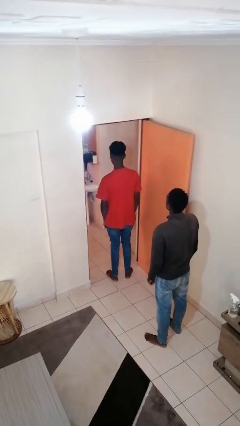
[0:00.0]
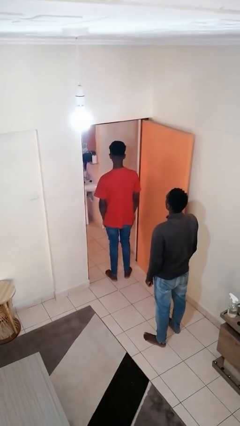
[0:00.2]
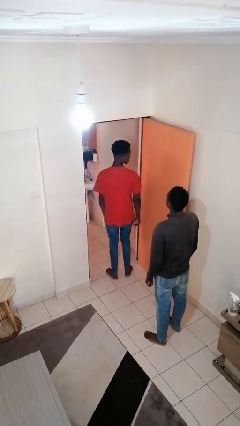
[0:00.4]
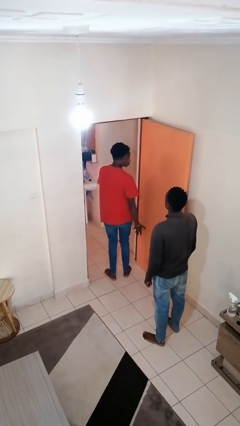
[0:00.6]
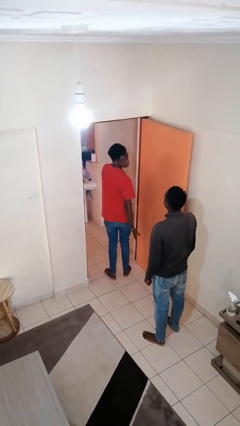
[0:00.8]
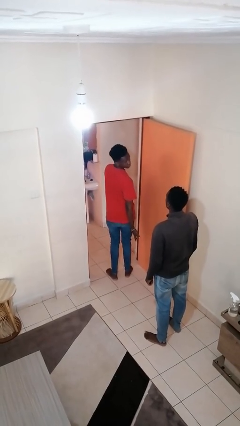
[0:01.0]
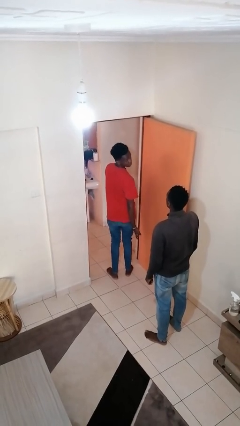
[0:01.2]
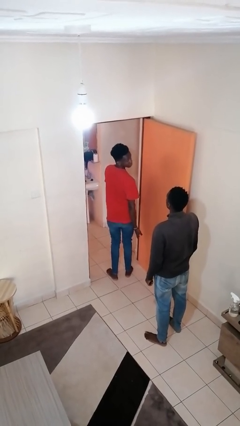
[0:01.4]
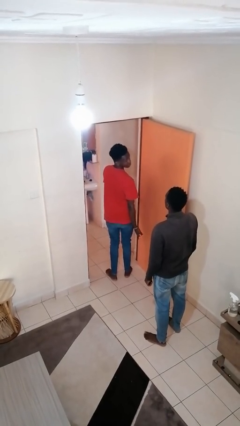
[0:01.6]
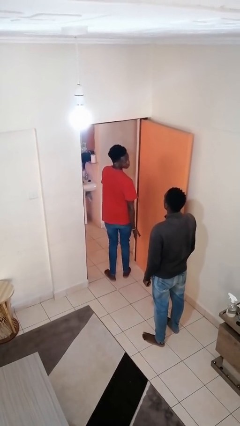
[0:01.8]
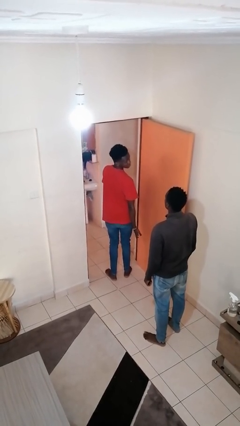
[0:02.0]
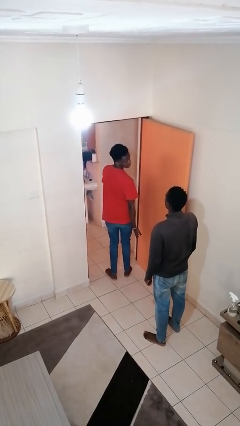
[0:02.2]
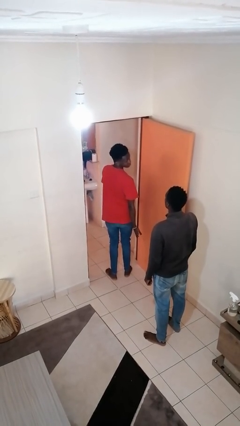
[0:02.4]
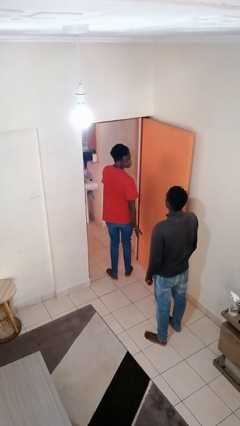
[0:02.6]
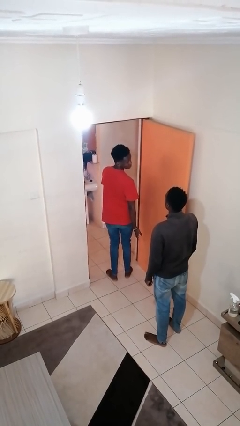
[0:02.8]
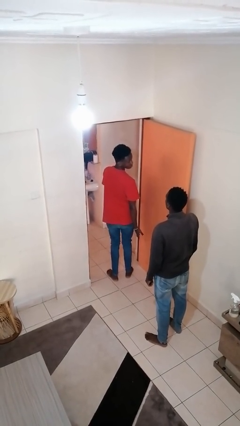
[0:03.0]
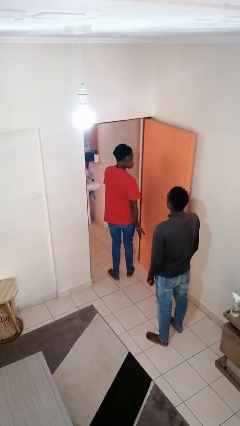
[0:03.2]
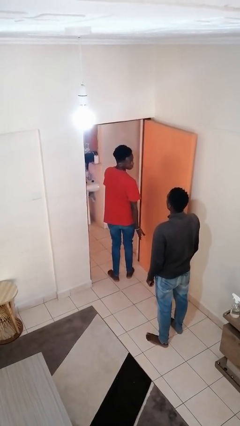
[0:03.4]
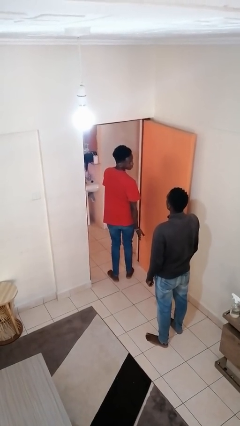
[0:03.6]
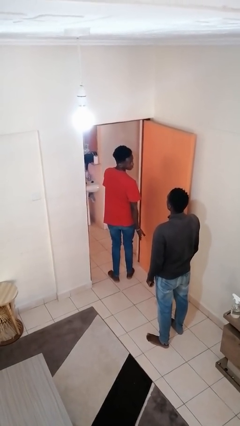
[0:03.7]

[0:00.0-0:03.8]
person looks over shoulder

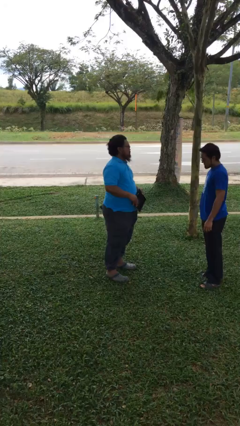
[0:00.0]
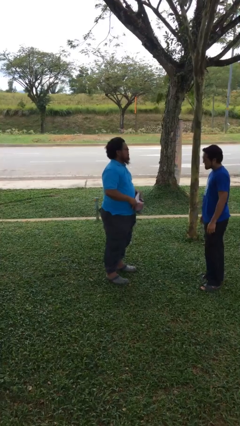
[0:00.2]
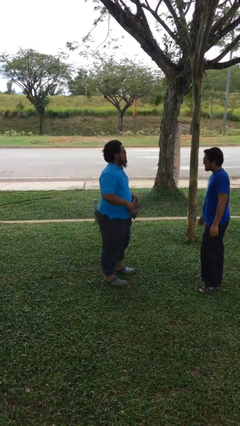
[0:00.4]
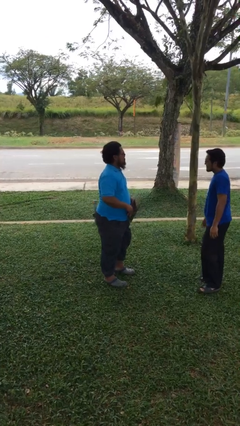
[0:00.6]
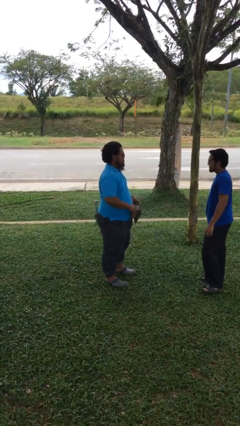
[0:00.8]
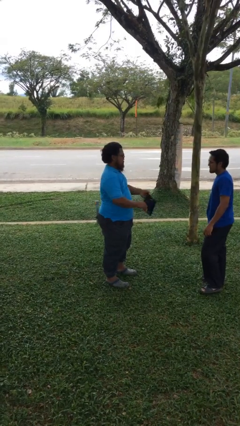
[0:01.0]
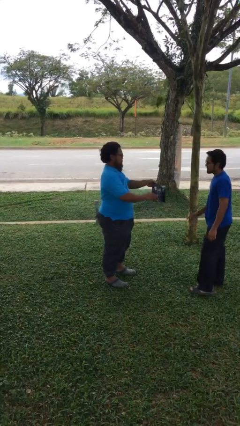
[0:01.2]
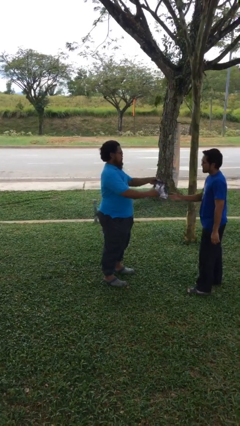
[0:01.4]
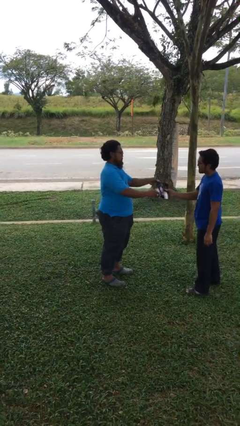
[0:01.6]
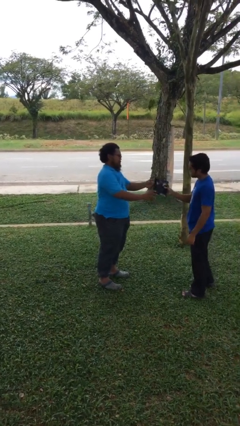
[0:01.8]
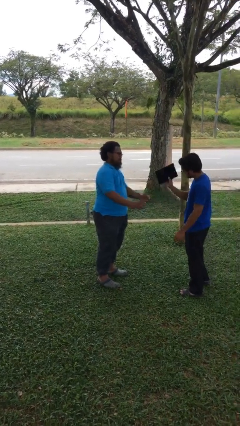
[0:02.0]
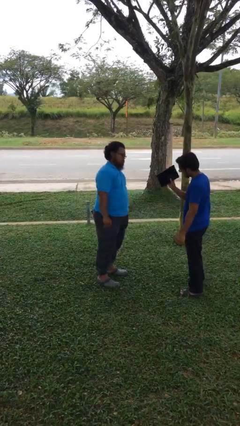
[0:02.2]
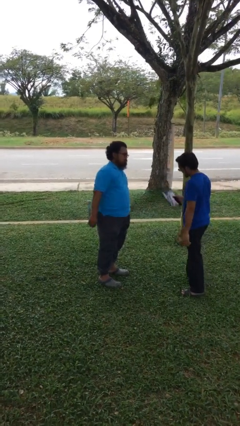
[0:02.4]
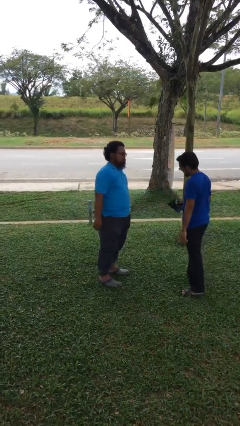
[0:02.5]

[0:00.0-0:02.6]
person transfers object to person

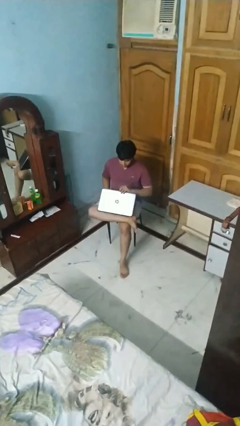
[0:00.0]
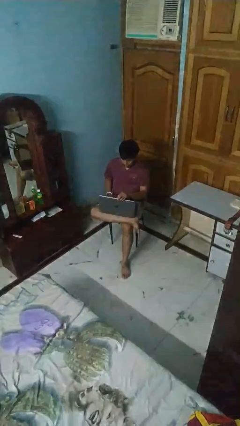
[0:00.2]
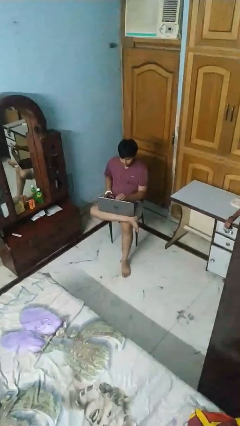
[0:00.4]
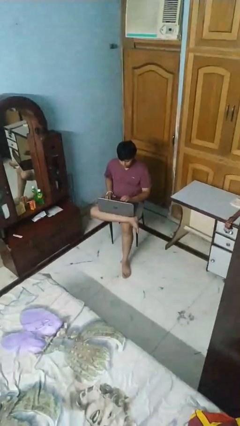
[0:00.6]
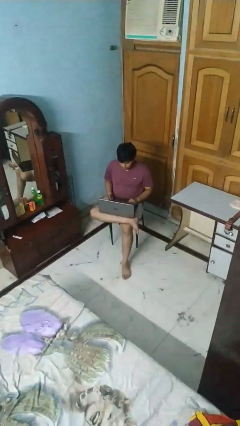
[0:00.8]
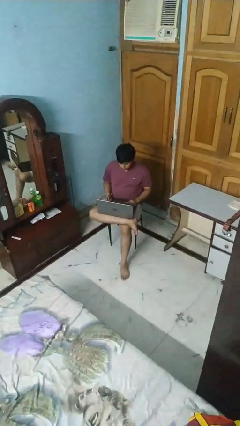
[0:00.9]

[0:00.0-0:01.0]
person opens laptop

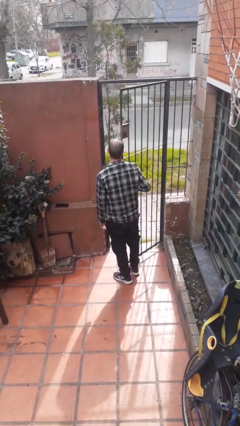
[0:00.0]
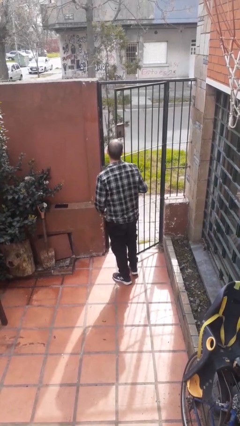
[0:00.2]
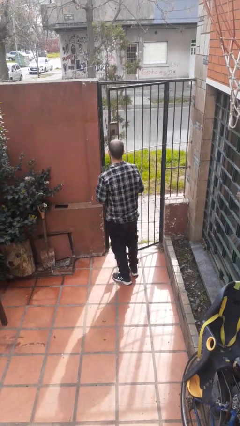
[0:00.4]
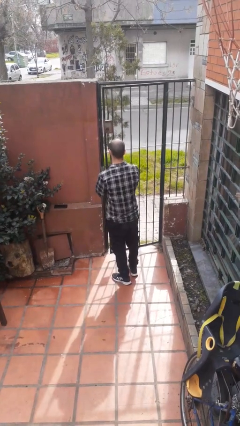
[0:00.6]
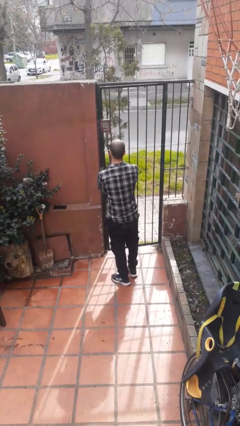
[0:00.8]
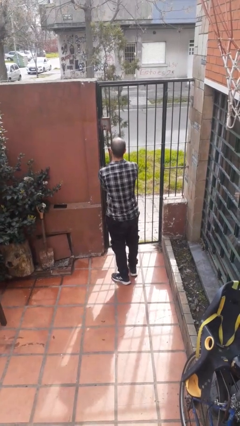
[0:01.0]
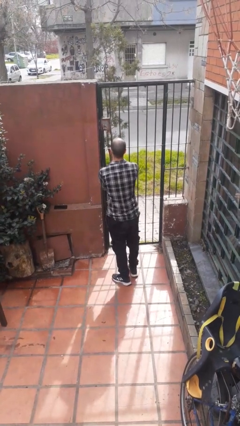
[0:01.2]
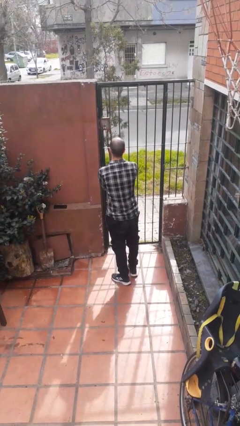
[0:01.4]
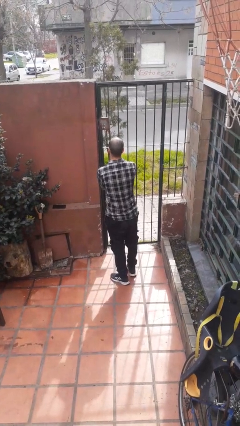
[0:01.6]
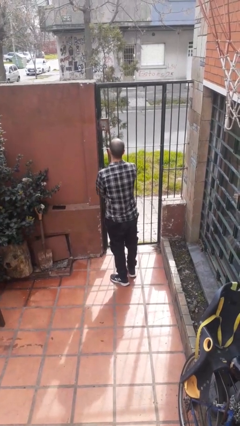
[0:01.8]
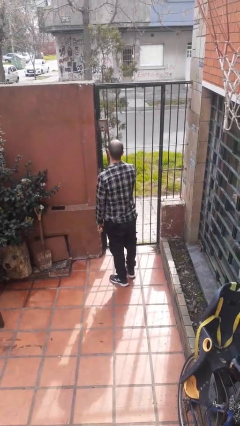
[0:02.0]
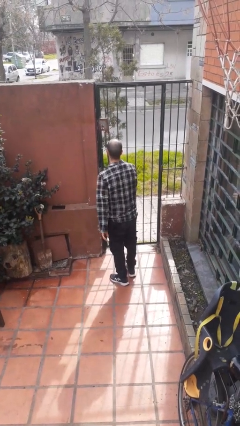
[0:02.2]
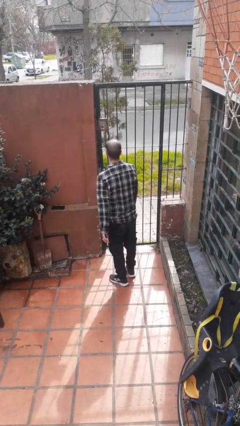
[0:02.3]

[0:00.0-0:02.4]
person closes gate

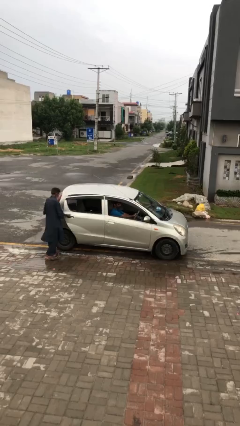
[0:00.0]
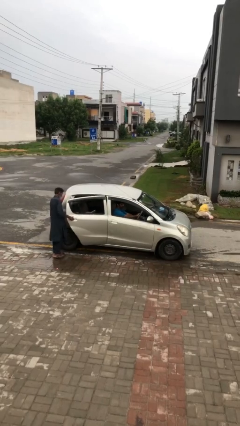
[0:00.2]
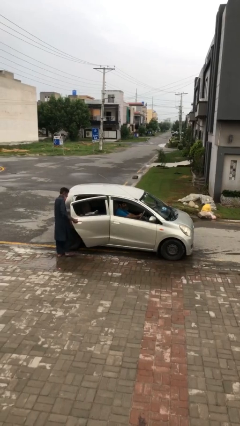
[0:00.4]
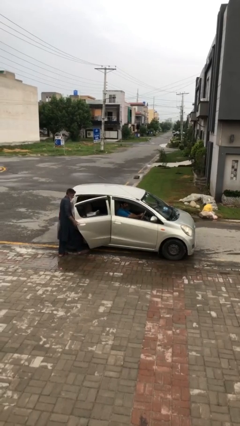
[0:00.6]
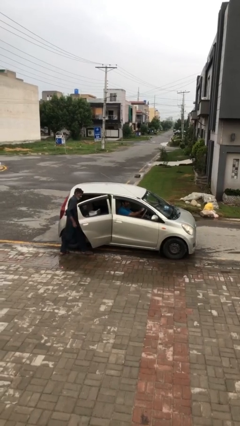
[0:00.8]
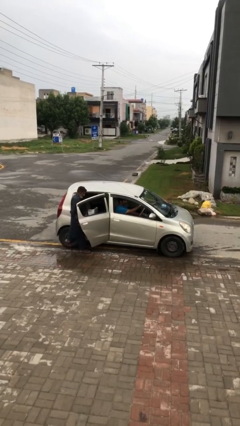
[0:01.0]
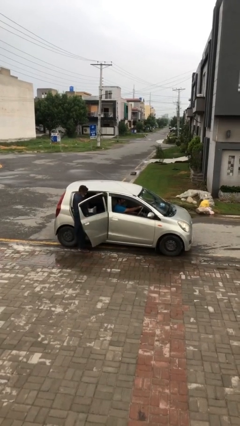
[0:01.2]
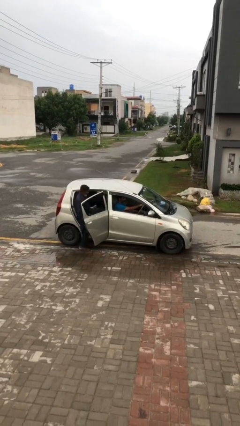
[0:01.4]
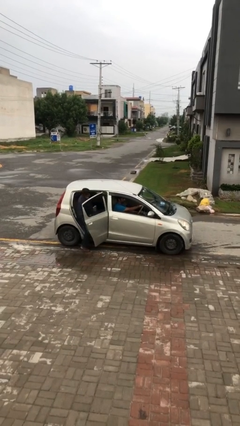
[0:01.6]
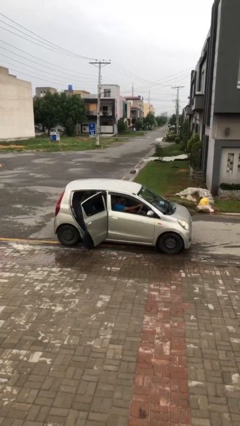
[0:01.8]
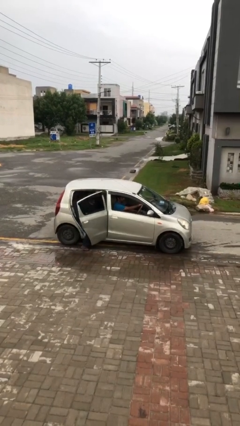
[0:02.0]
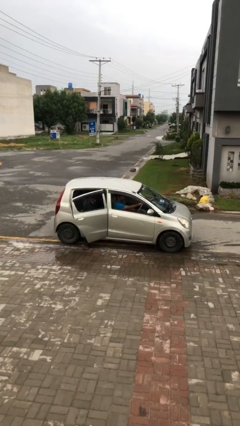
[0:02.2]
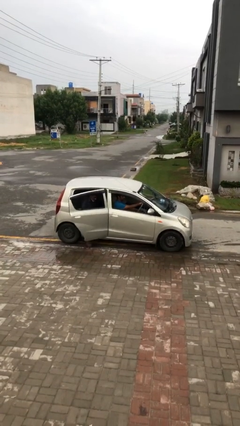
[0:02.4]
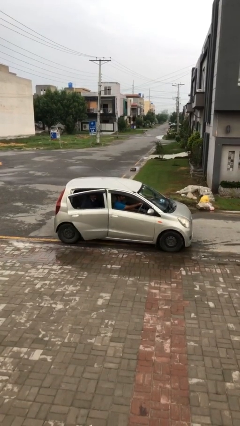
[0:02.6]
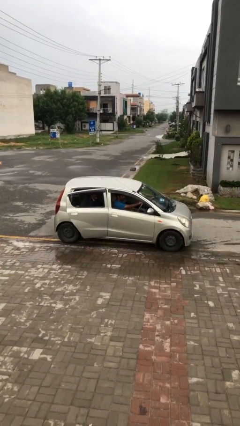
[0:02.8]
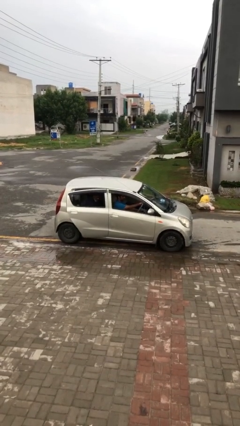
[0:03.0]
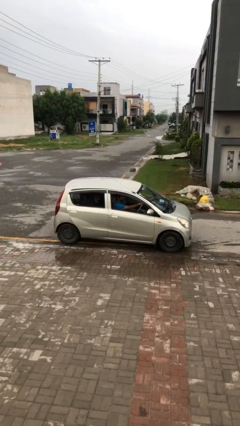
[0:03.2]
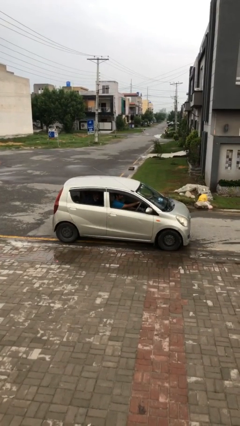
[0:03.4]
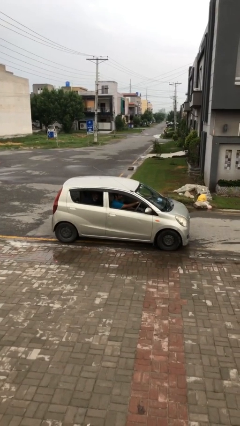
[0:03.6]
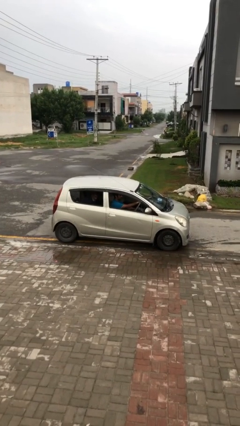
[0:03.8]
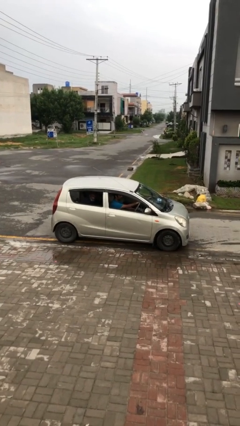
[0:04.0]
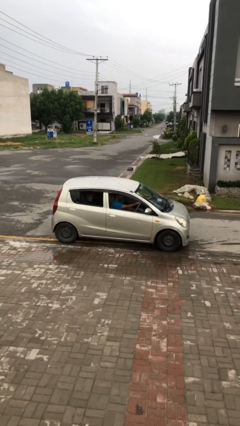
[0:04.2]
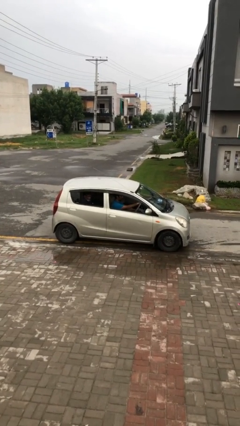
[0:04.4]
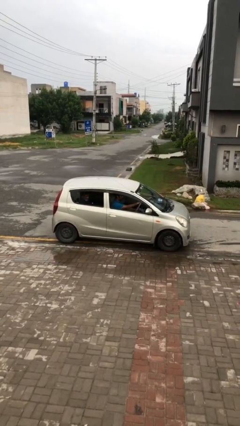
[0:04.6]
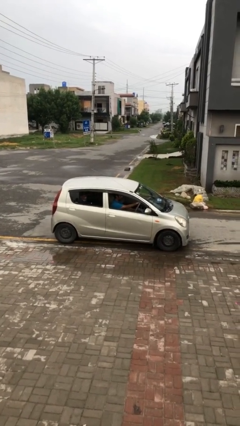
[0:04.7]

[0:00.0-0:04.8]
car picks up person

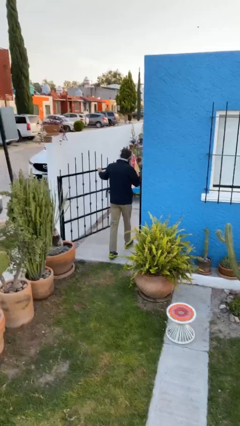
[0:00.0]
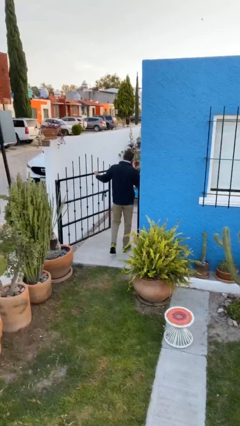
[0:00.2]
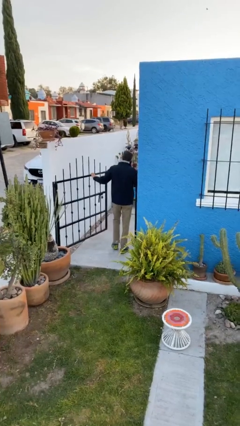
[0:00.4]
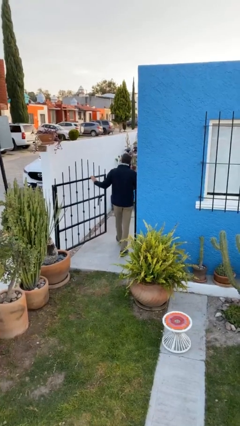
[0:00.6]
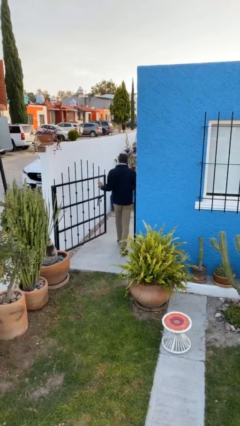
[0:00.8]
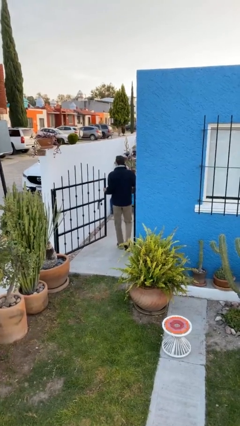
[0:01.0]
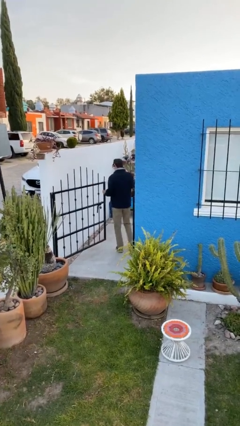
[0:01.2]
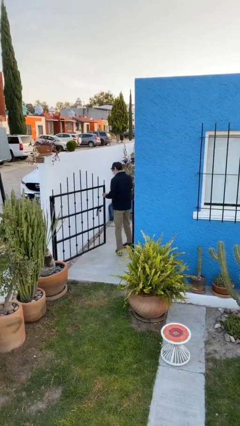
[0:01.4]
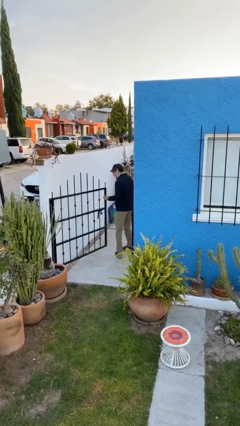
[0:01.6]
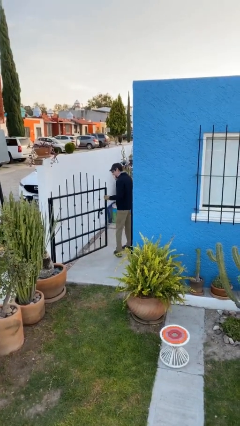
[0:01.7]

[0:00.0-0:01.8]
person exits scene through structure

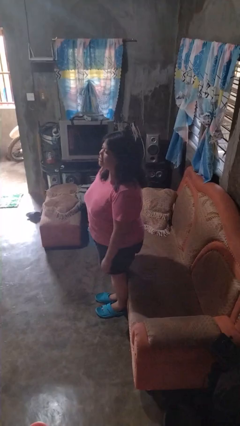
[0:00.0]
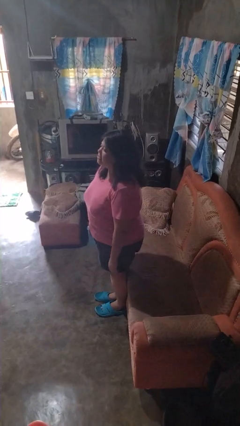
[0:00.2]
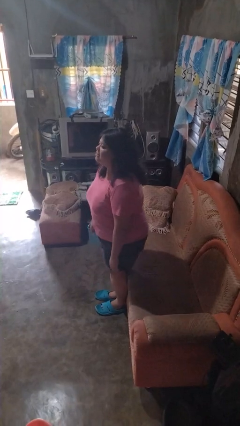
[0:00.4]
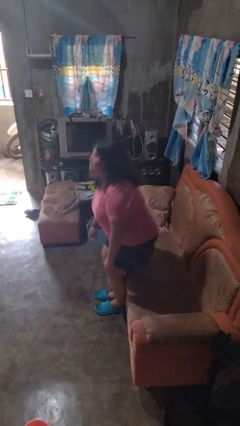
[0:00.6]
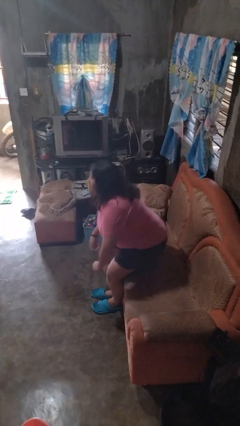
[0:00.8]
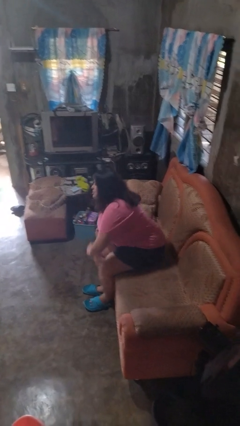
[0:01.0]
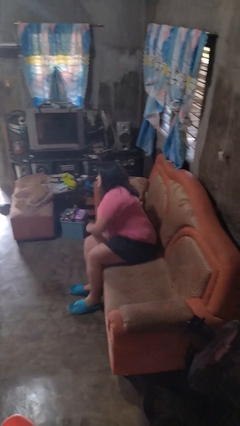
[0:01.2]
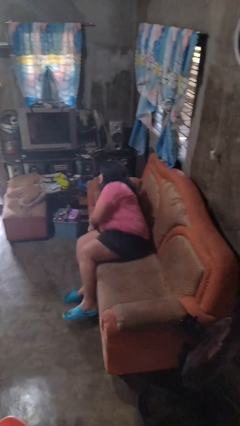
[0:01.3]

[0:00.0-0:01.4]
person lies down on couch
